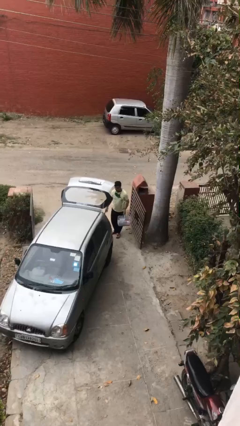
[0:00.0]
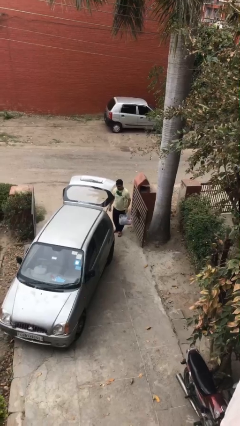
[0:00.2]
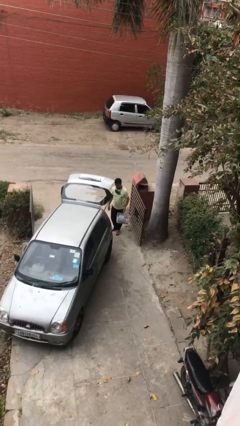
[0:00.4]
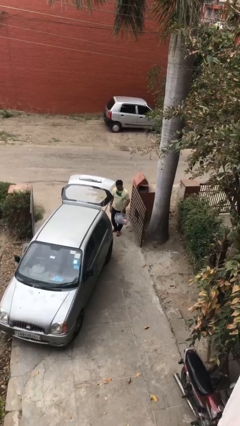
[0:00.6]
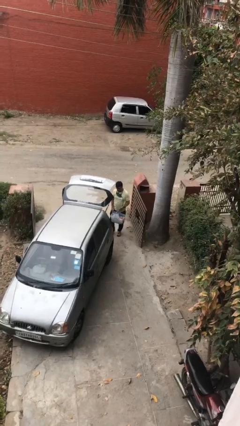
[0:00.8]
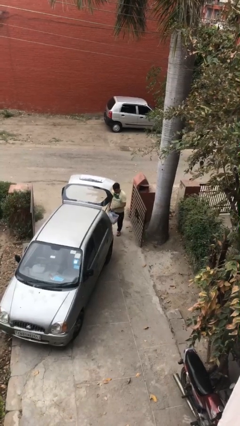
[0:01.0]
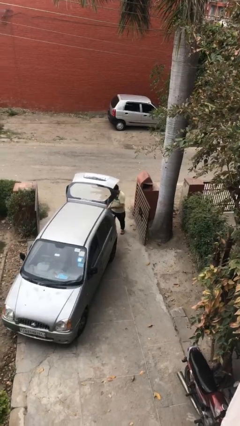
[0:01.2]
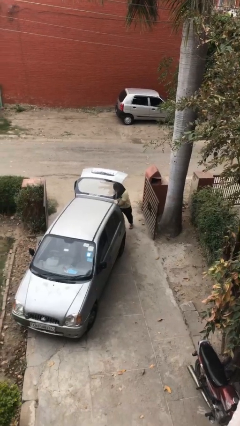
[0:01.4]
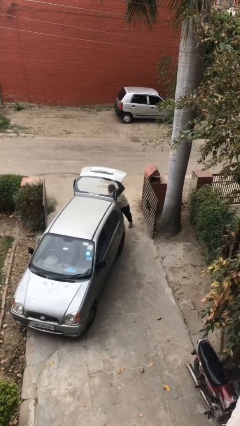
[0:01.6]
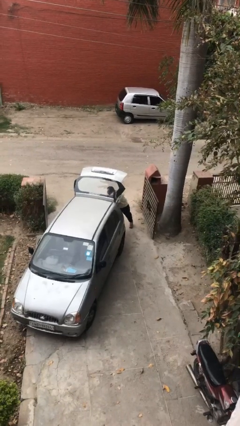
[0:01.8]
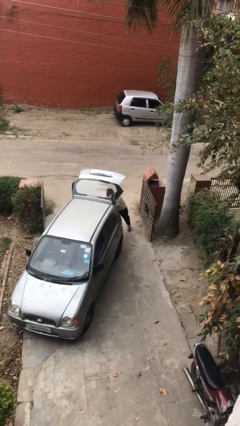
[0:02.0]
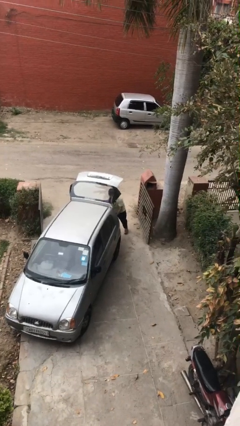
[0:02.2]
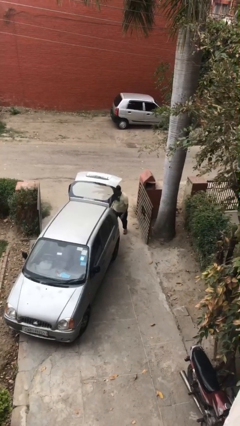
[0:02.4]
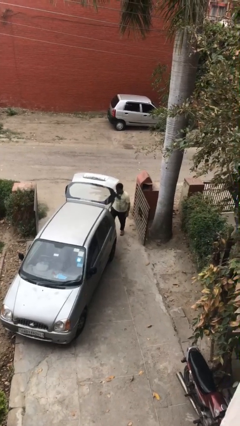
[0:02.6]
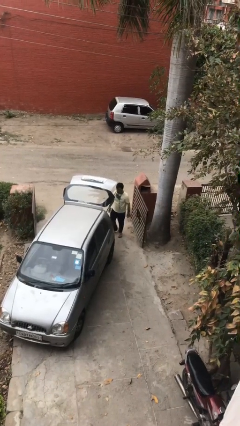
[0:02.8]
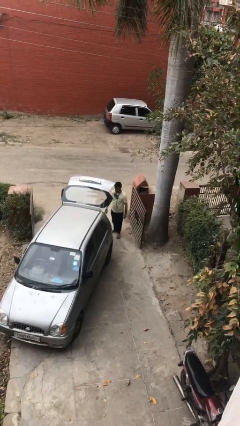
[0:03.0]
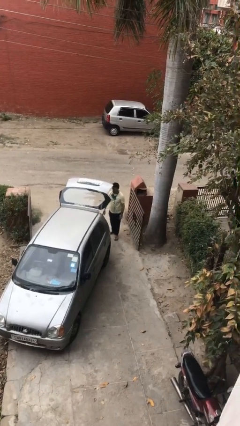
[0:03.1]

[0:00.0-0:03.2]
person loads car

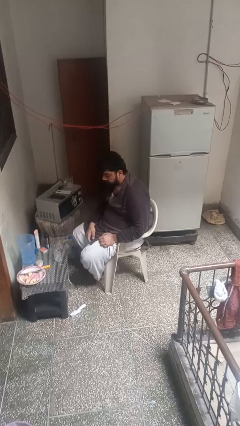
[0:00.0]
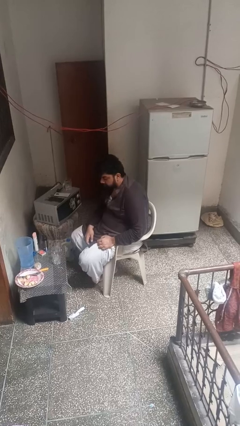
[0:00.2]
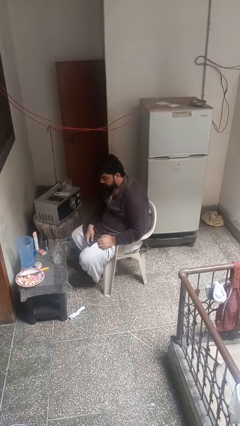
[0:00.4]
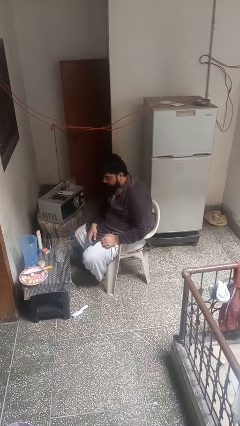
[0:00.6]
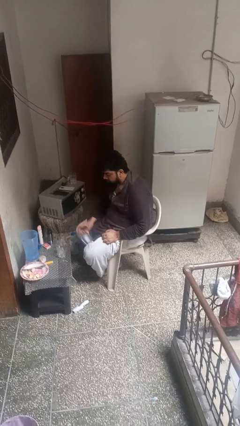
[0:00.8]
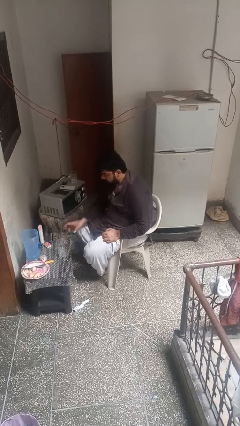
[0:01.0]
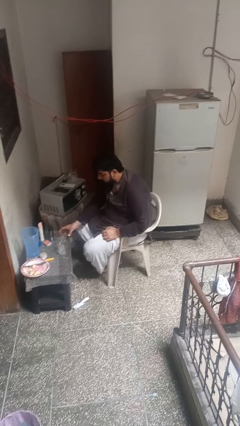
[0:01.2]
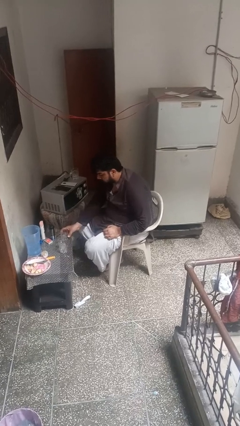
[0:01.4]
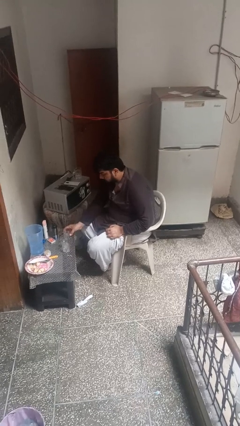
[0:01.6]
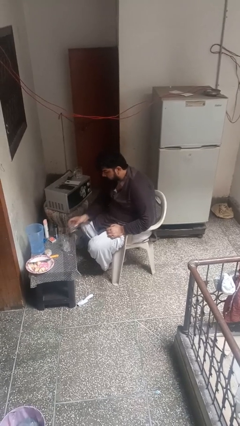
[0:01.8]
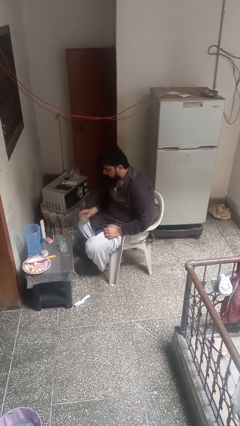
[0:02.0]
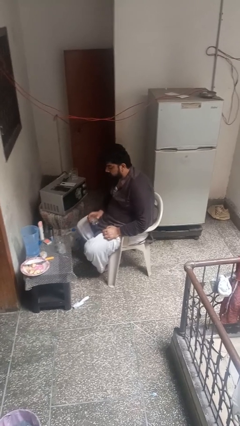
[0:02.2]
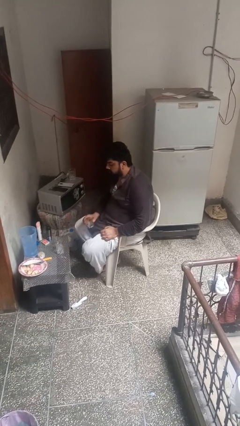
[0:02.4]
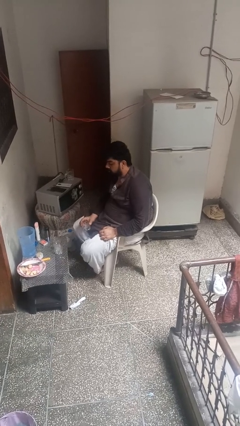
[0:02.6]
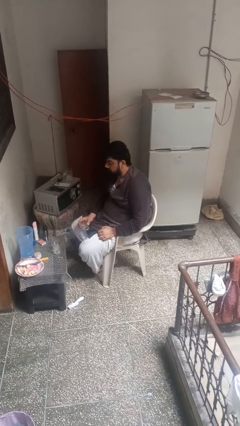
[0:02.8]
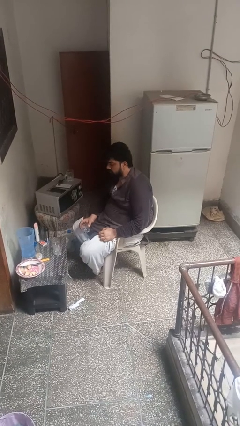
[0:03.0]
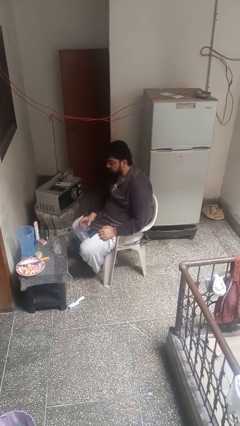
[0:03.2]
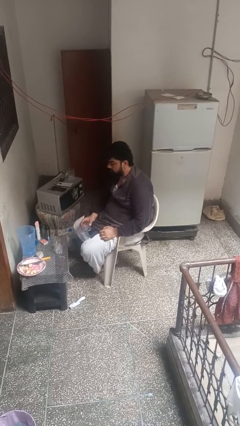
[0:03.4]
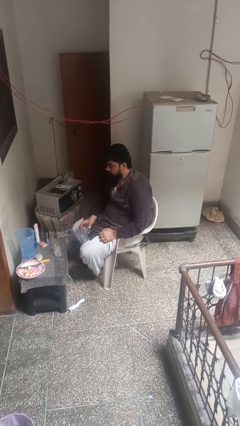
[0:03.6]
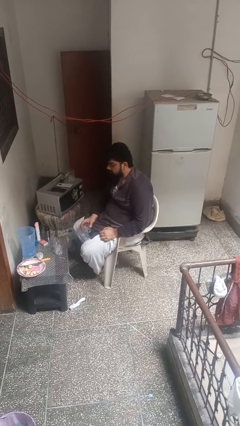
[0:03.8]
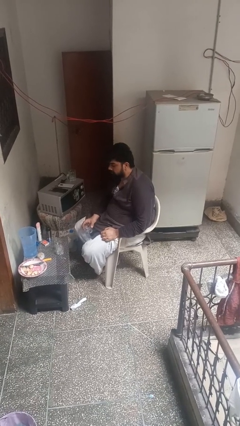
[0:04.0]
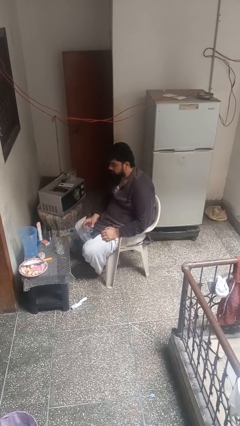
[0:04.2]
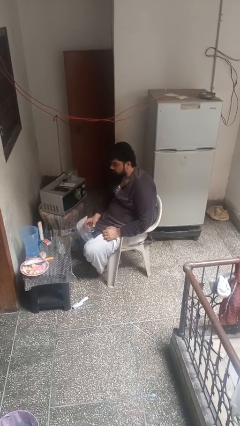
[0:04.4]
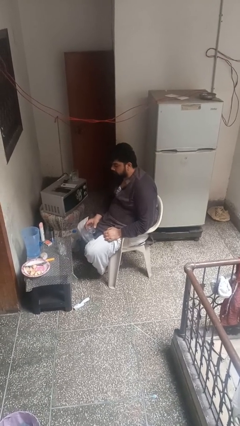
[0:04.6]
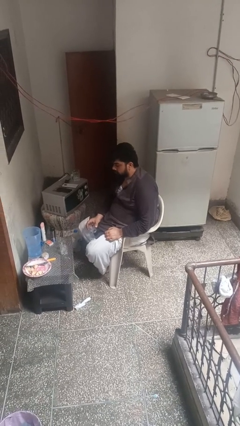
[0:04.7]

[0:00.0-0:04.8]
person picks up object from table

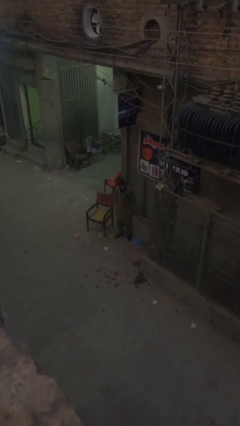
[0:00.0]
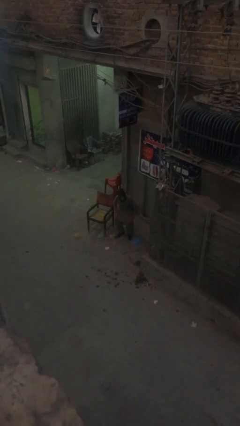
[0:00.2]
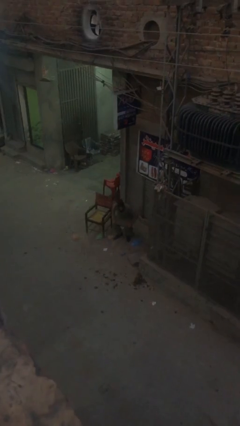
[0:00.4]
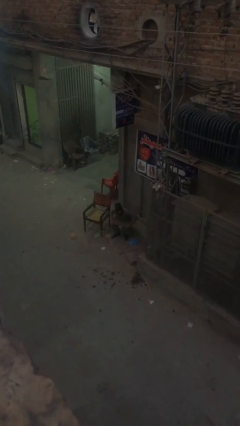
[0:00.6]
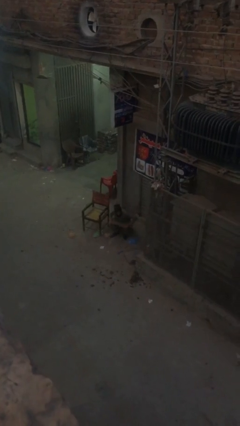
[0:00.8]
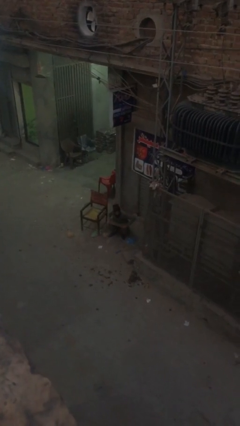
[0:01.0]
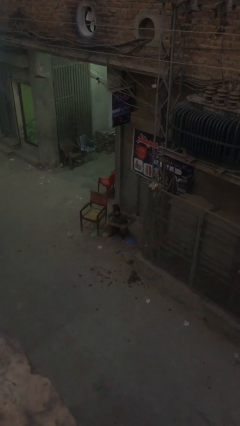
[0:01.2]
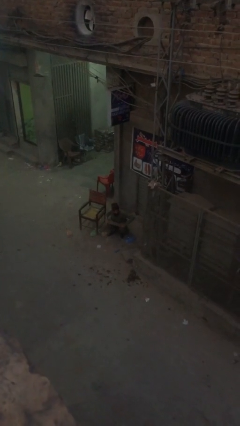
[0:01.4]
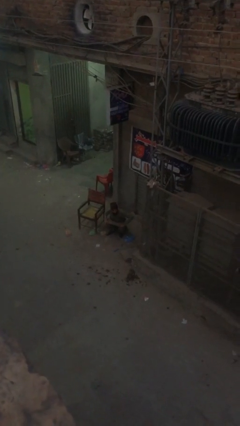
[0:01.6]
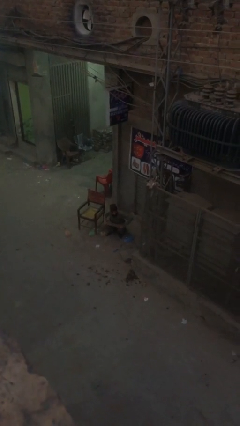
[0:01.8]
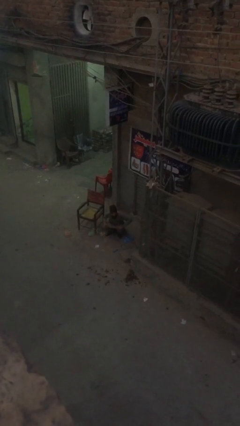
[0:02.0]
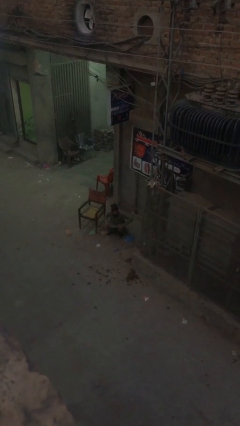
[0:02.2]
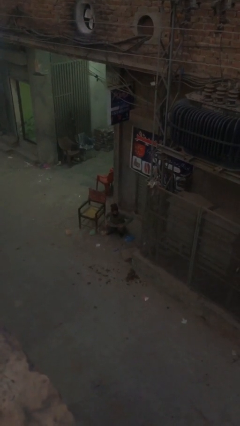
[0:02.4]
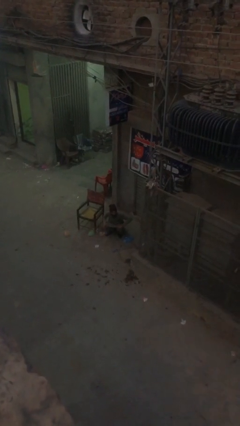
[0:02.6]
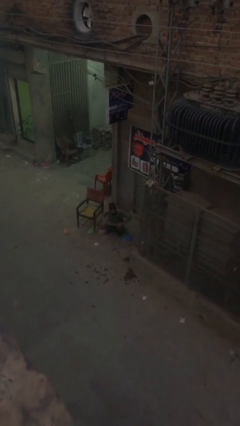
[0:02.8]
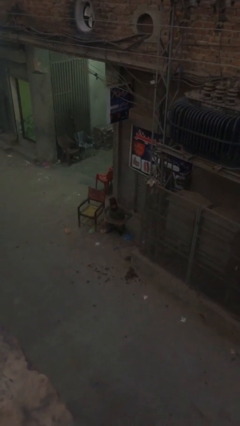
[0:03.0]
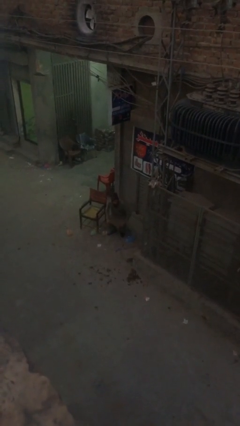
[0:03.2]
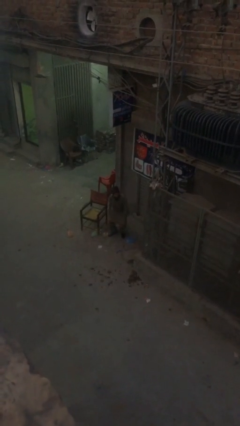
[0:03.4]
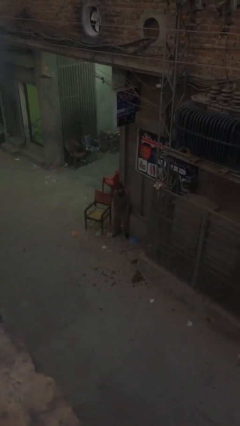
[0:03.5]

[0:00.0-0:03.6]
person sits down

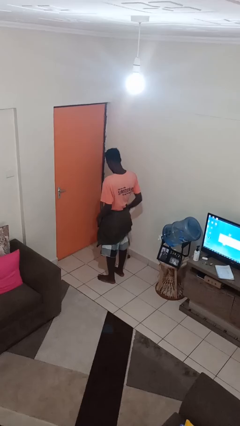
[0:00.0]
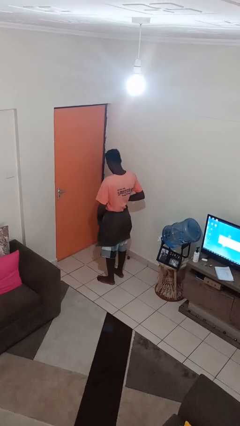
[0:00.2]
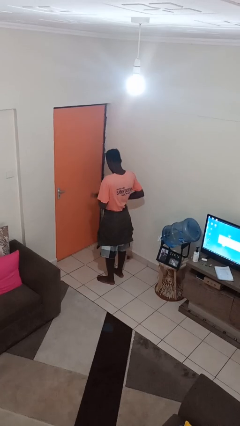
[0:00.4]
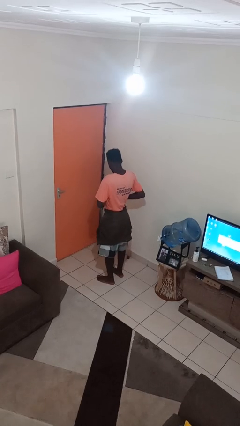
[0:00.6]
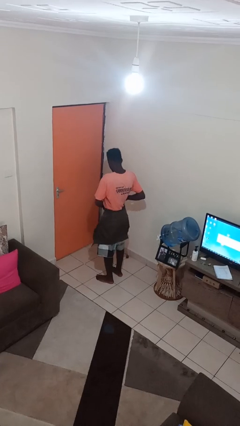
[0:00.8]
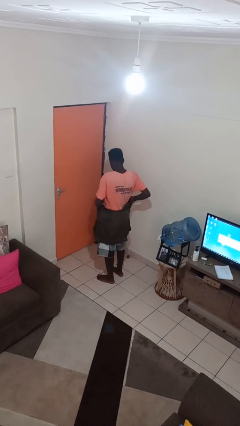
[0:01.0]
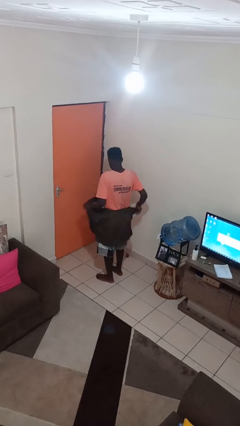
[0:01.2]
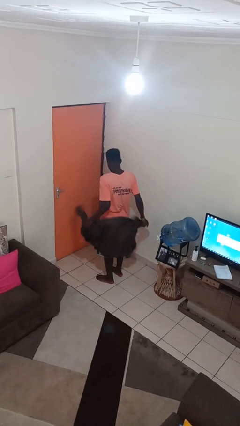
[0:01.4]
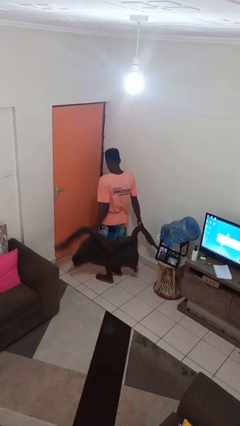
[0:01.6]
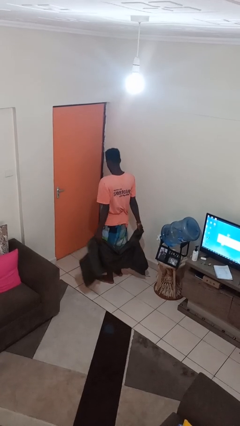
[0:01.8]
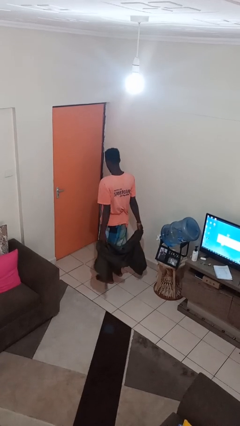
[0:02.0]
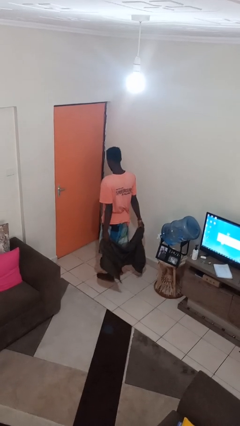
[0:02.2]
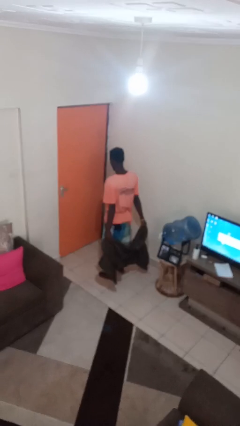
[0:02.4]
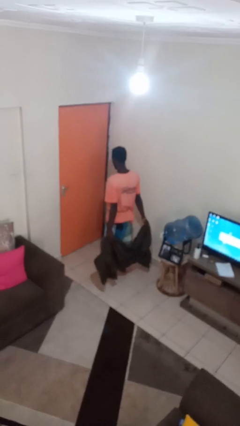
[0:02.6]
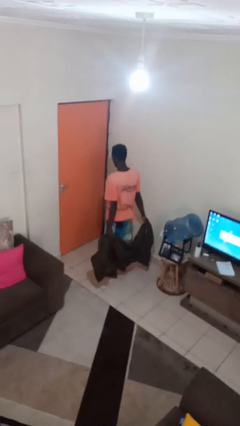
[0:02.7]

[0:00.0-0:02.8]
person unties jacket around waist

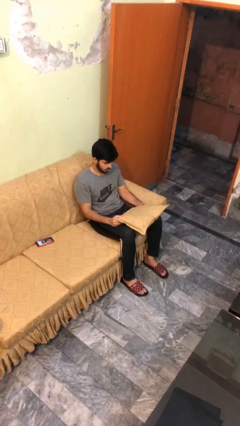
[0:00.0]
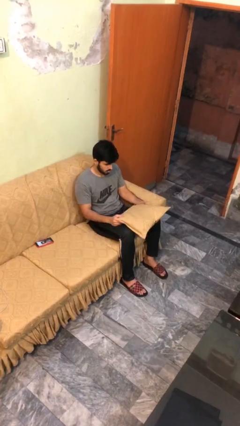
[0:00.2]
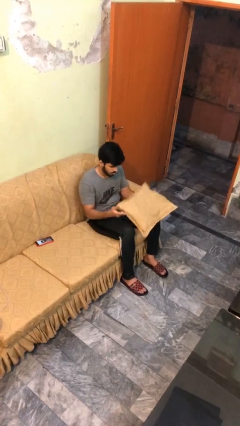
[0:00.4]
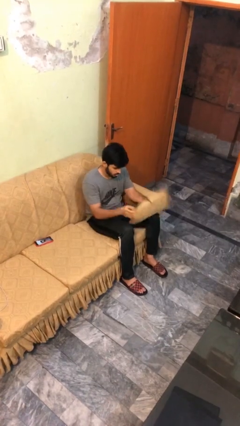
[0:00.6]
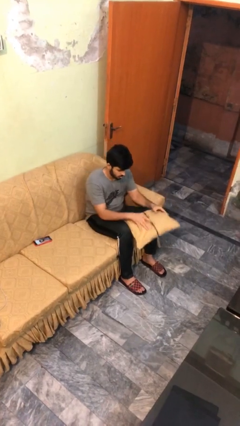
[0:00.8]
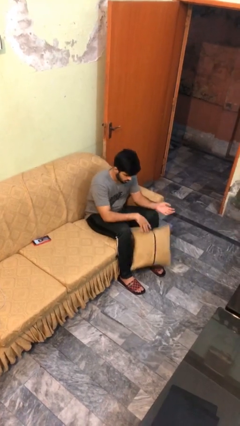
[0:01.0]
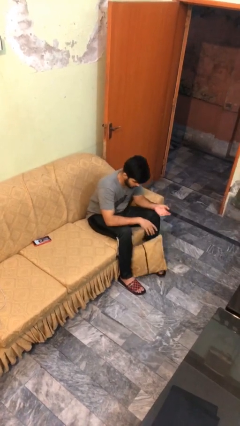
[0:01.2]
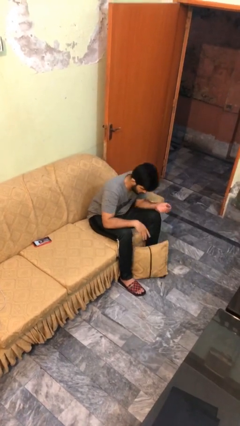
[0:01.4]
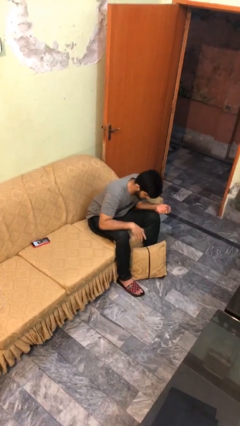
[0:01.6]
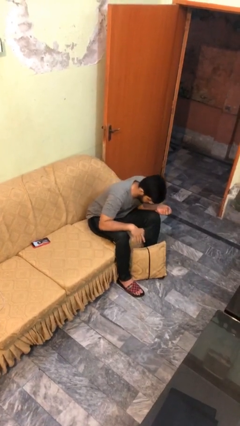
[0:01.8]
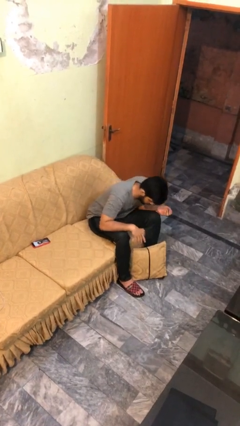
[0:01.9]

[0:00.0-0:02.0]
person drops object

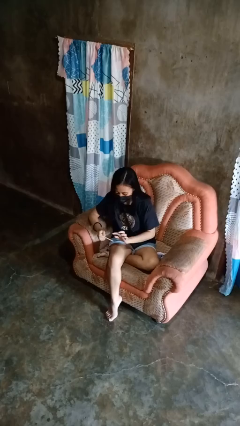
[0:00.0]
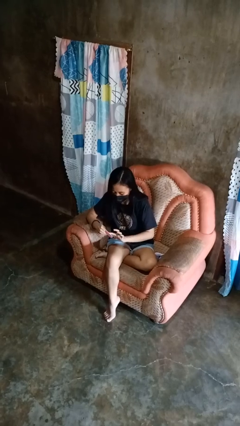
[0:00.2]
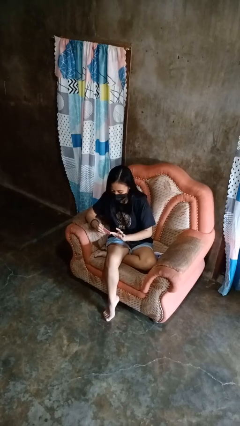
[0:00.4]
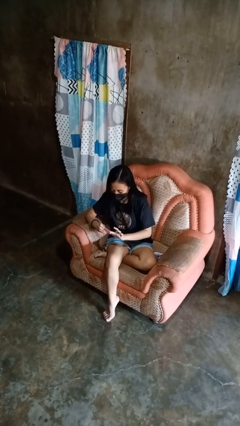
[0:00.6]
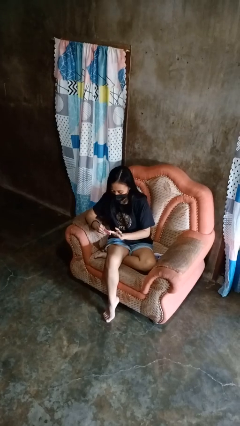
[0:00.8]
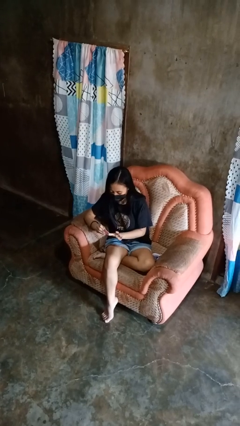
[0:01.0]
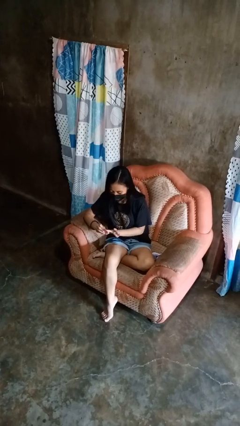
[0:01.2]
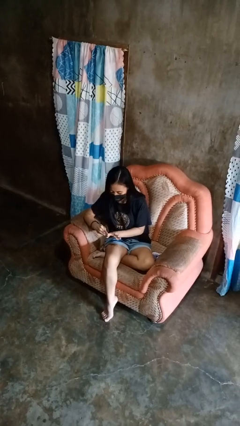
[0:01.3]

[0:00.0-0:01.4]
person files fingernails
